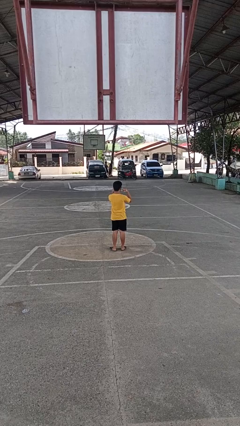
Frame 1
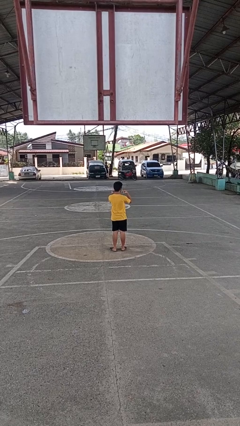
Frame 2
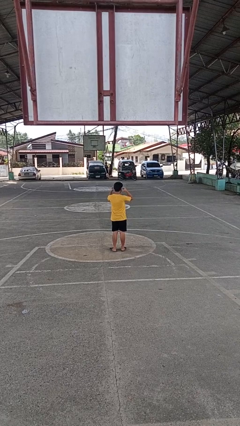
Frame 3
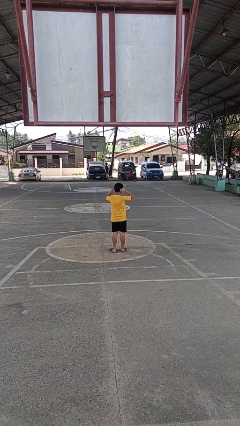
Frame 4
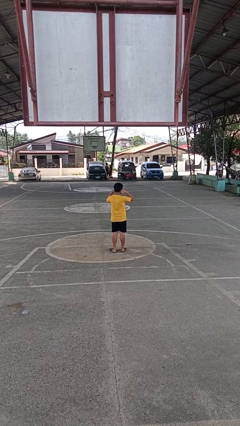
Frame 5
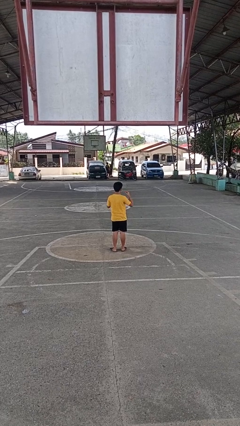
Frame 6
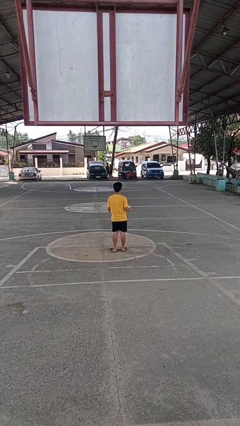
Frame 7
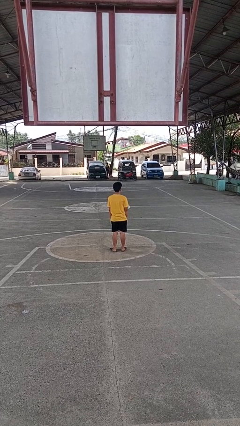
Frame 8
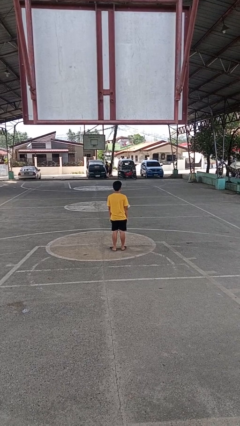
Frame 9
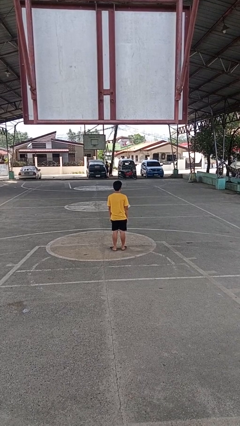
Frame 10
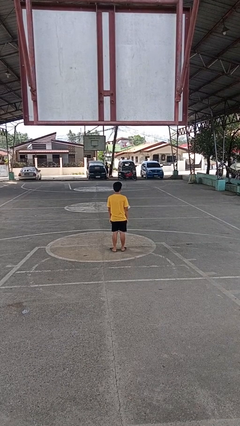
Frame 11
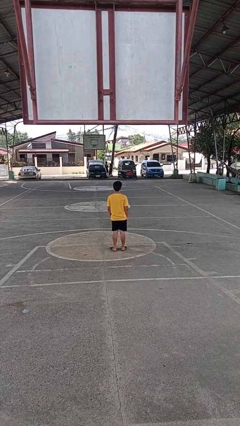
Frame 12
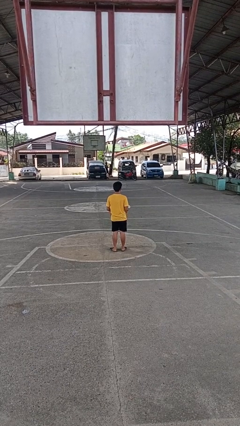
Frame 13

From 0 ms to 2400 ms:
person puts on facemask

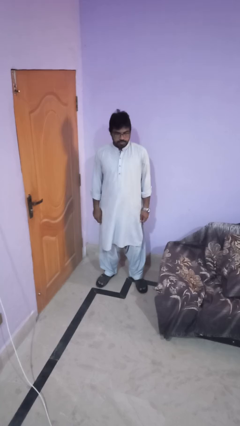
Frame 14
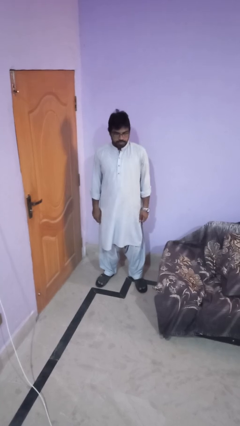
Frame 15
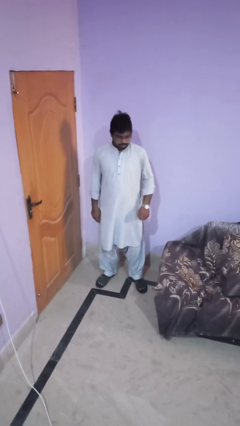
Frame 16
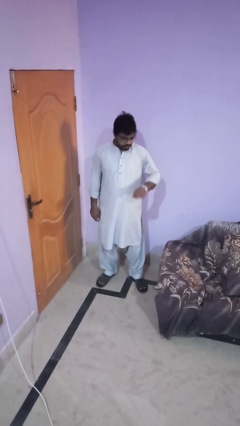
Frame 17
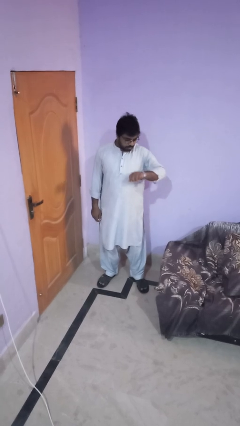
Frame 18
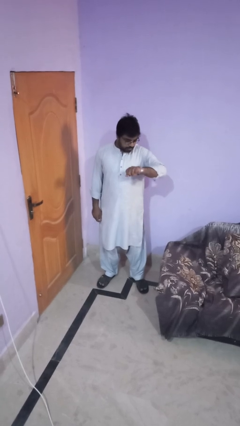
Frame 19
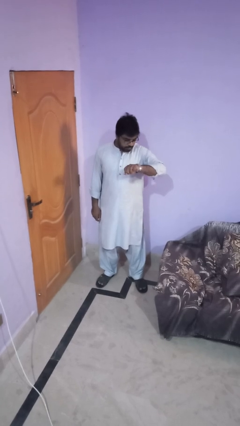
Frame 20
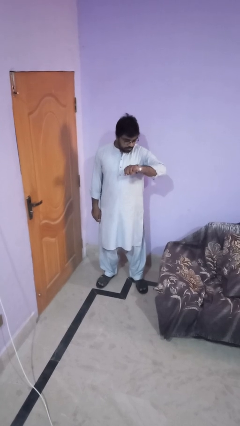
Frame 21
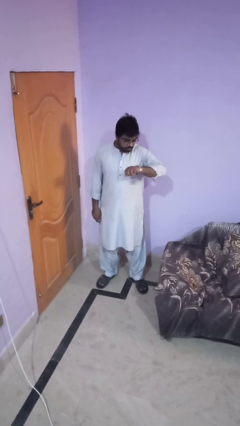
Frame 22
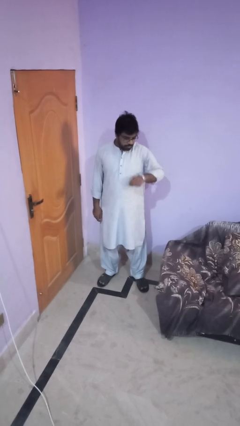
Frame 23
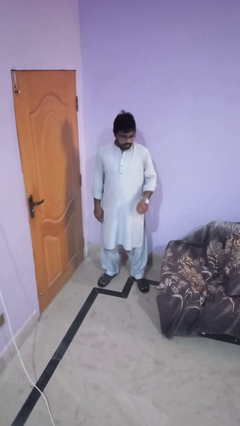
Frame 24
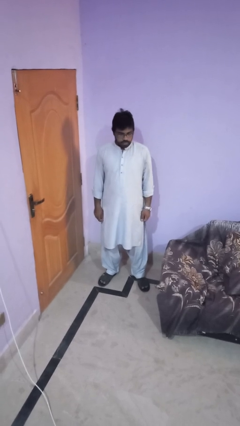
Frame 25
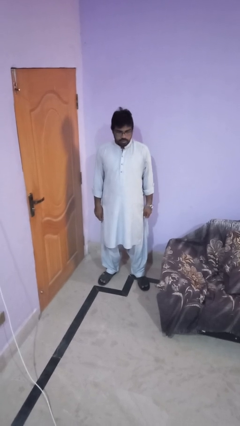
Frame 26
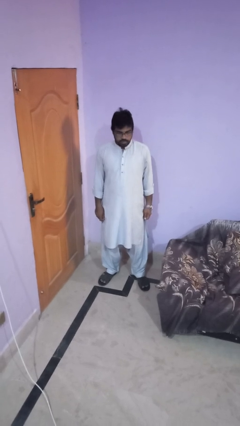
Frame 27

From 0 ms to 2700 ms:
person looks at wristwatch

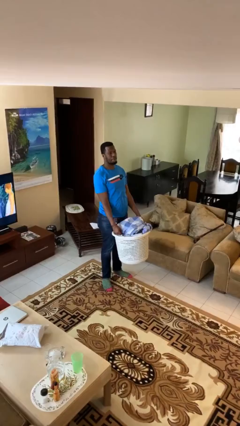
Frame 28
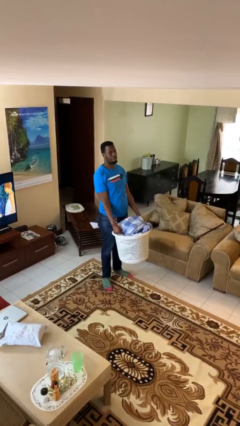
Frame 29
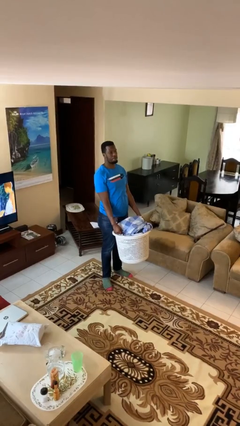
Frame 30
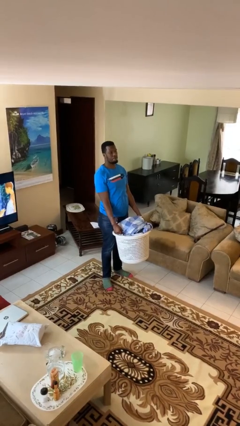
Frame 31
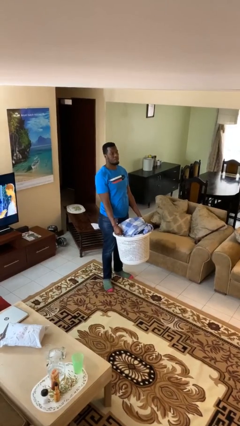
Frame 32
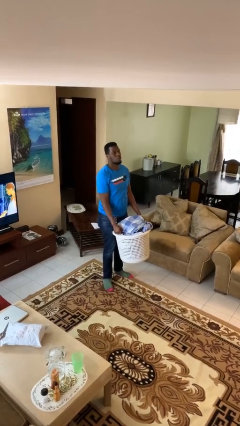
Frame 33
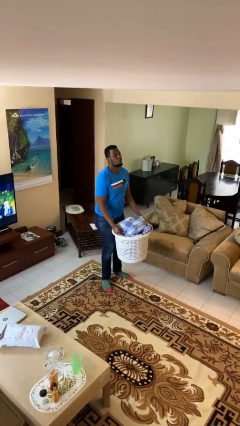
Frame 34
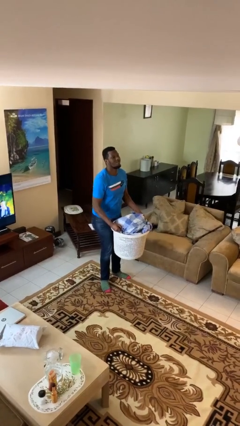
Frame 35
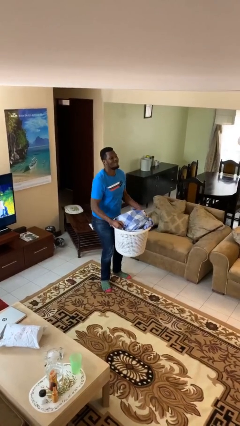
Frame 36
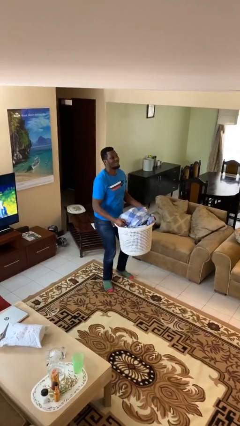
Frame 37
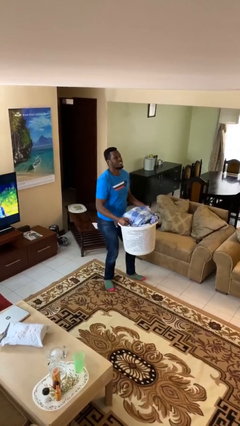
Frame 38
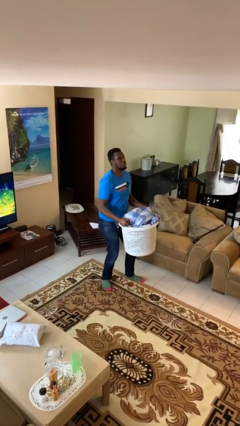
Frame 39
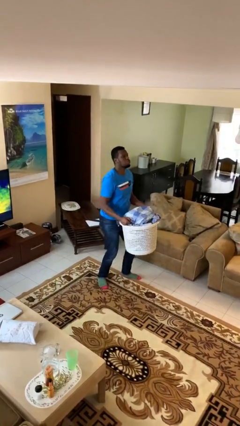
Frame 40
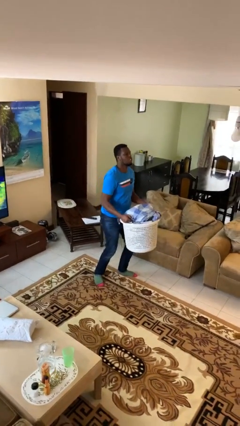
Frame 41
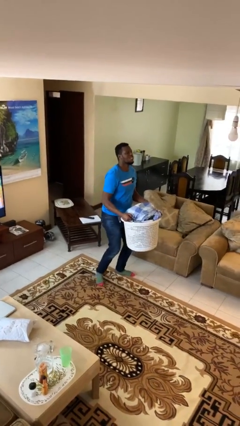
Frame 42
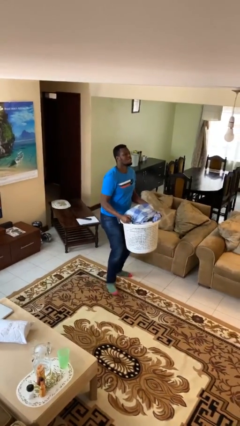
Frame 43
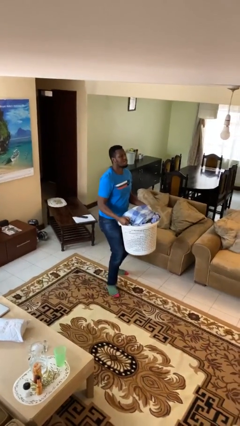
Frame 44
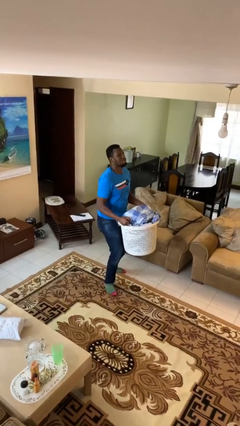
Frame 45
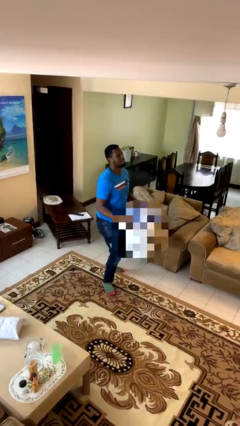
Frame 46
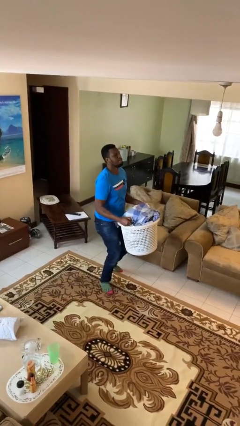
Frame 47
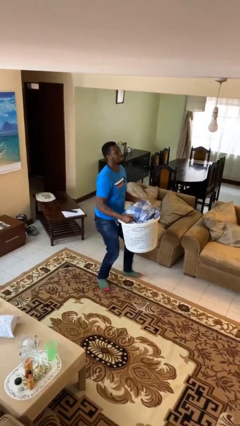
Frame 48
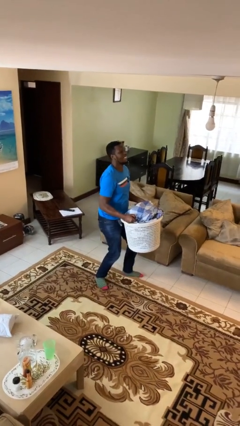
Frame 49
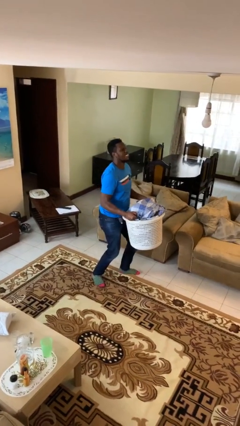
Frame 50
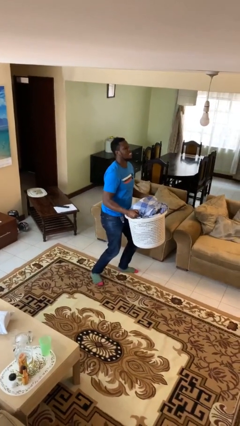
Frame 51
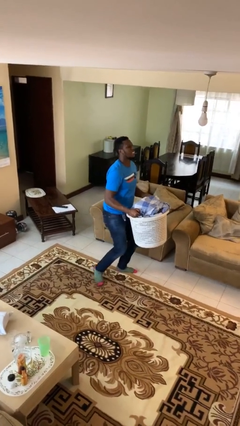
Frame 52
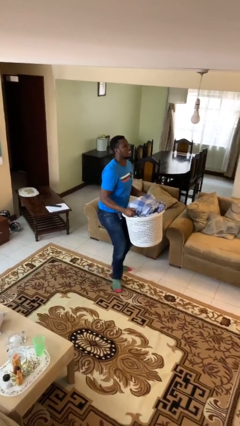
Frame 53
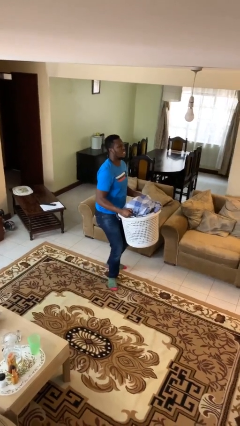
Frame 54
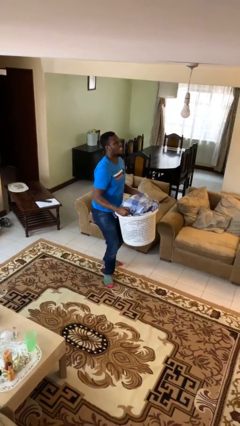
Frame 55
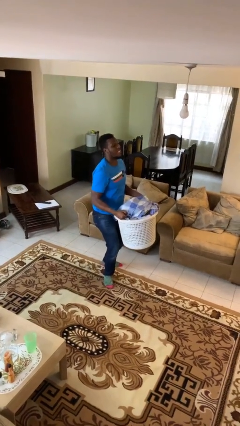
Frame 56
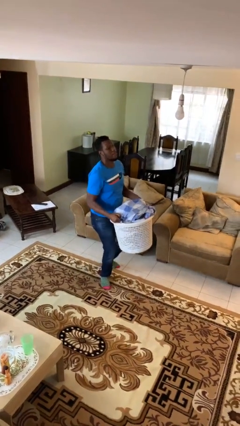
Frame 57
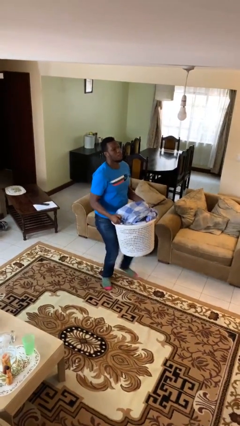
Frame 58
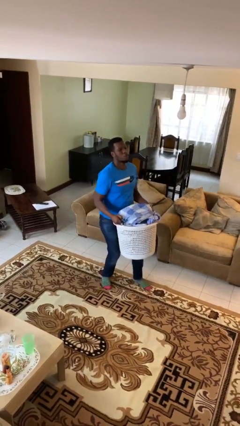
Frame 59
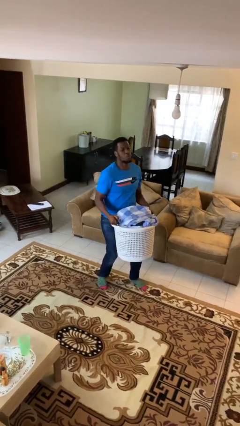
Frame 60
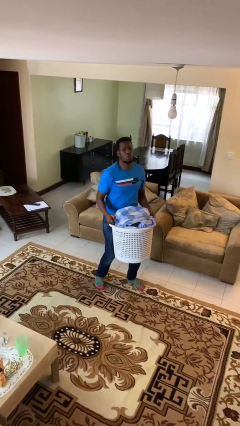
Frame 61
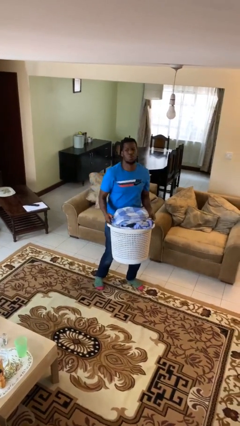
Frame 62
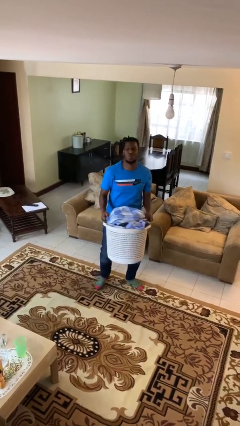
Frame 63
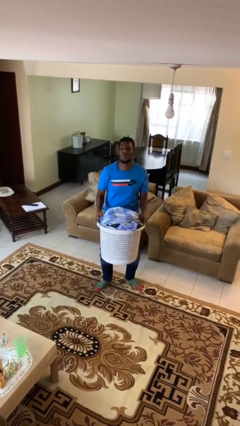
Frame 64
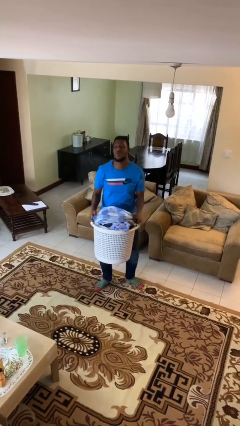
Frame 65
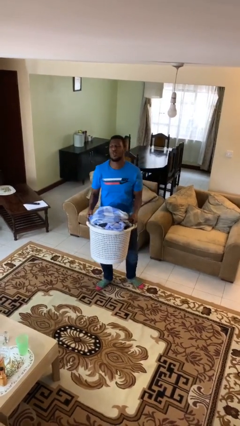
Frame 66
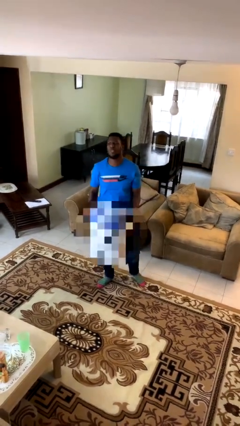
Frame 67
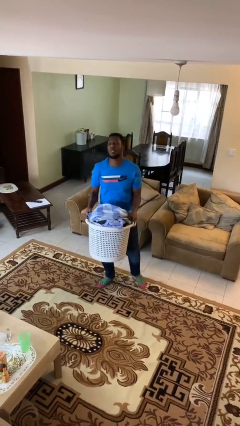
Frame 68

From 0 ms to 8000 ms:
person carries heavy object

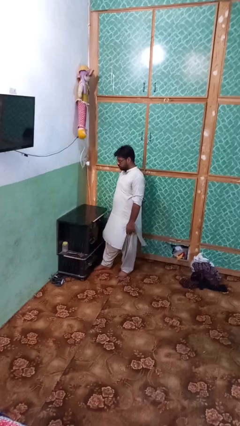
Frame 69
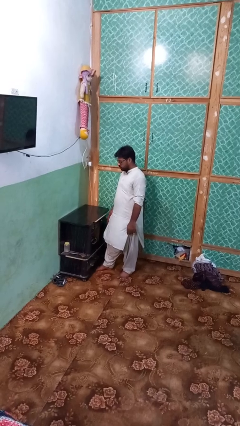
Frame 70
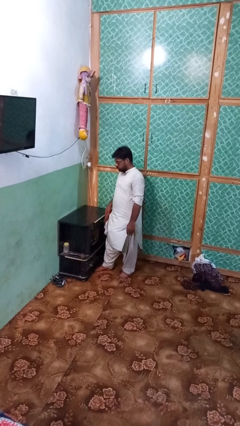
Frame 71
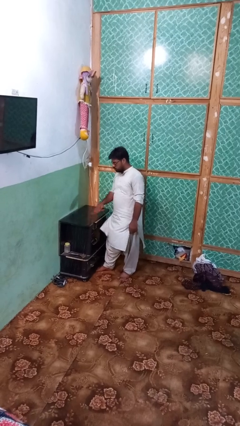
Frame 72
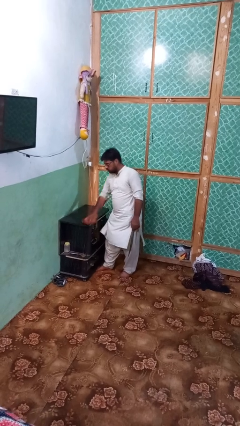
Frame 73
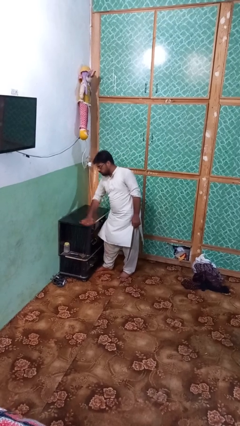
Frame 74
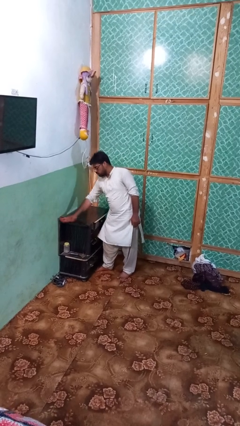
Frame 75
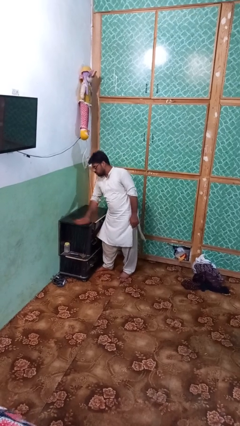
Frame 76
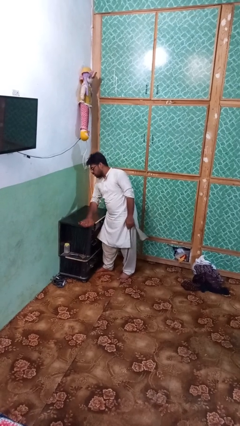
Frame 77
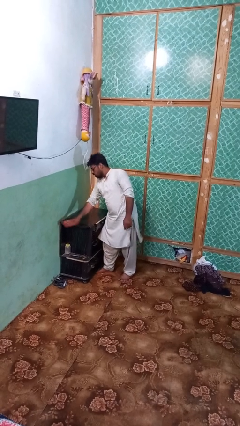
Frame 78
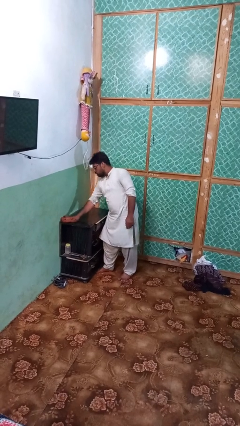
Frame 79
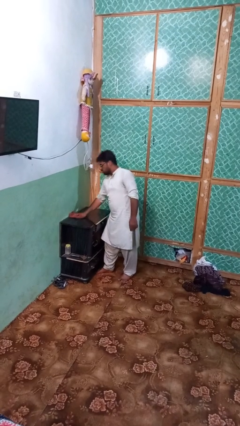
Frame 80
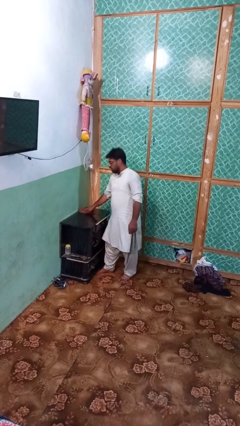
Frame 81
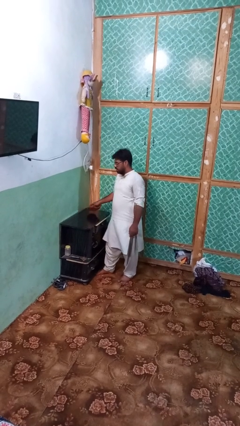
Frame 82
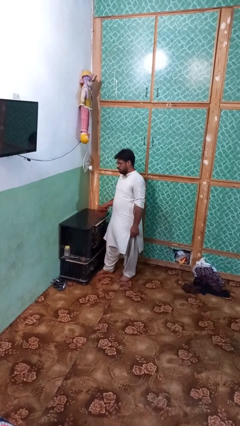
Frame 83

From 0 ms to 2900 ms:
person cleans table with rag

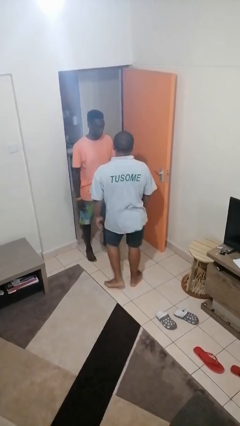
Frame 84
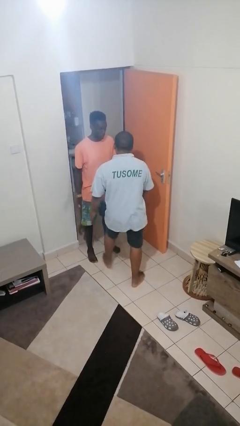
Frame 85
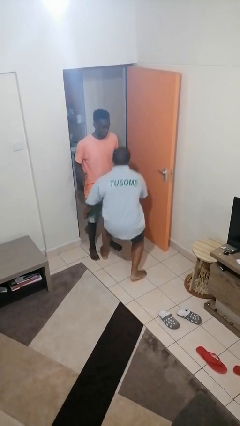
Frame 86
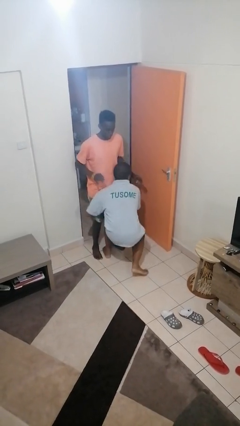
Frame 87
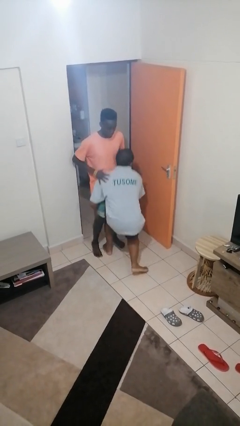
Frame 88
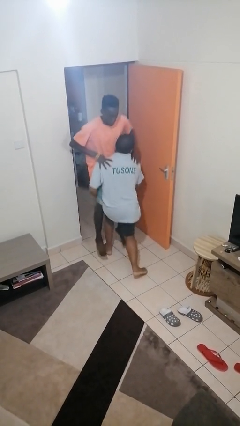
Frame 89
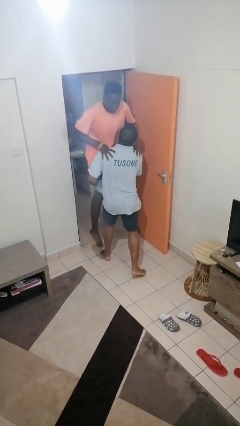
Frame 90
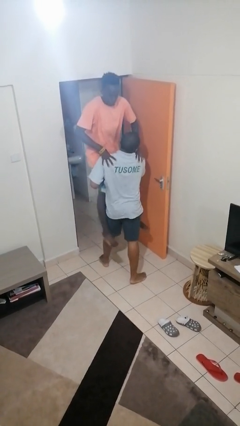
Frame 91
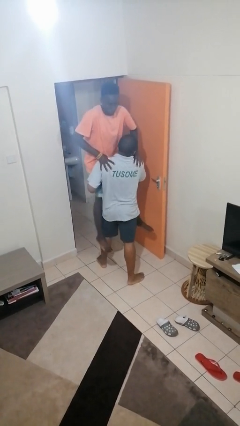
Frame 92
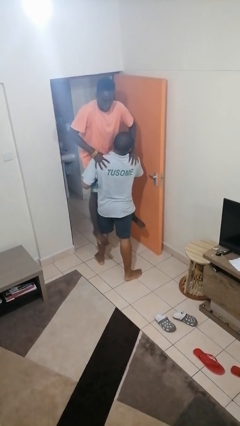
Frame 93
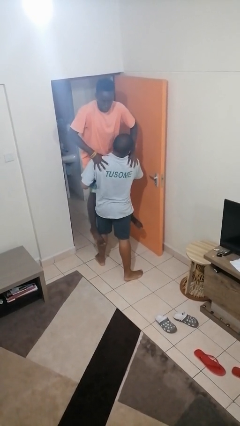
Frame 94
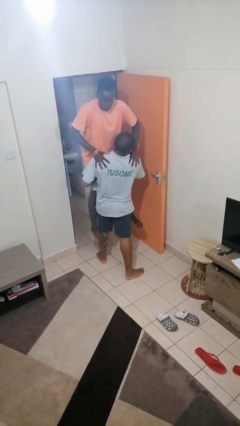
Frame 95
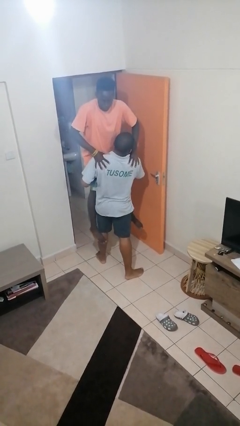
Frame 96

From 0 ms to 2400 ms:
person picks up person
